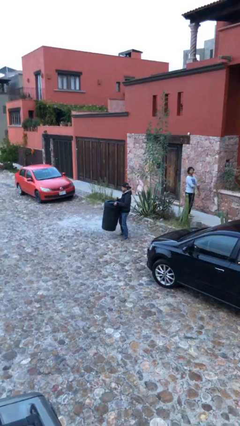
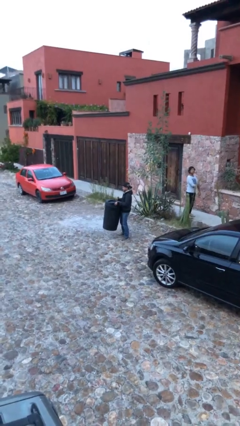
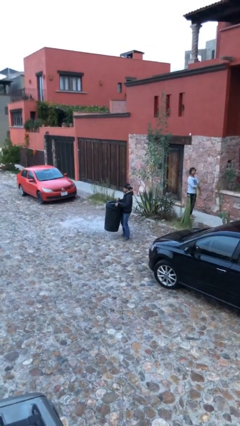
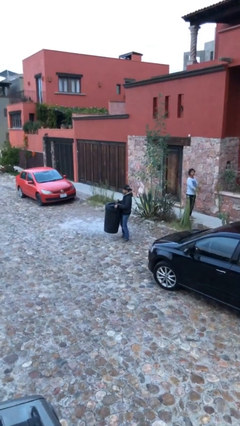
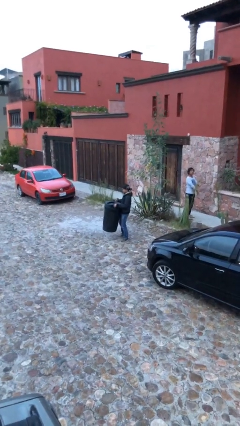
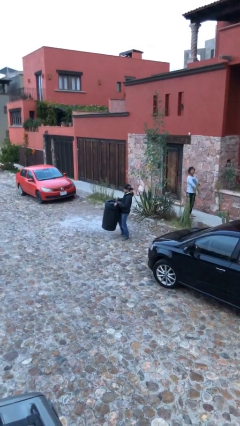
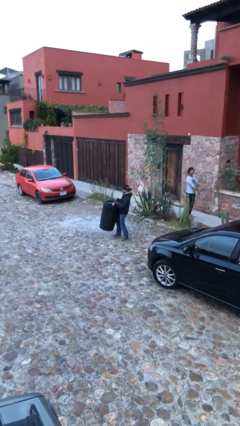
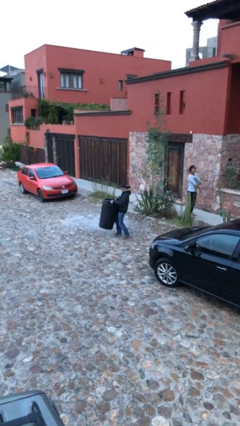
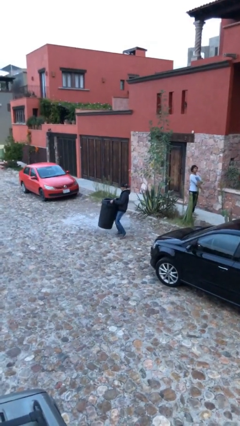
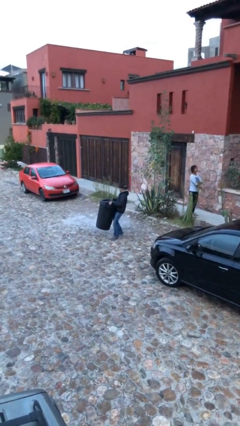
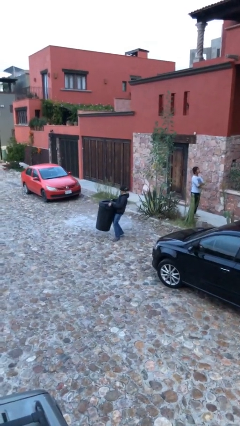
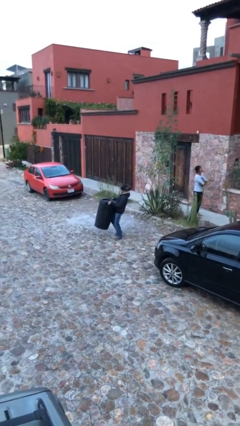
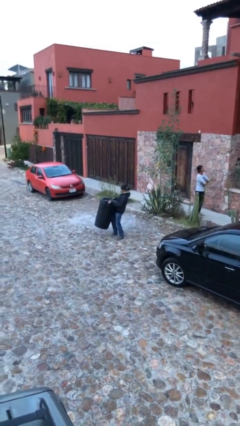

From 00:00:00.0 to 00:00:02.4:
person carries heavy object

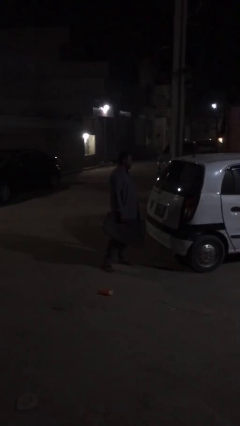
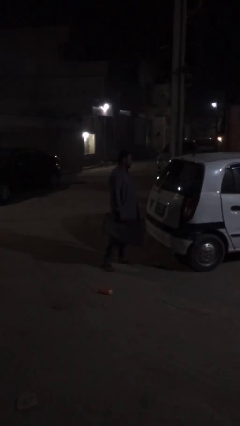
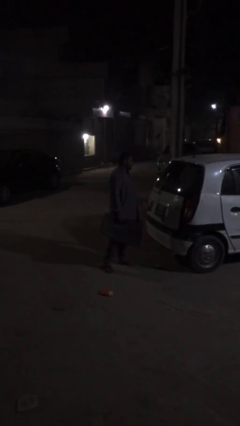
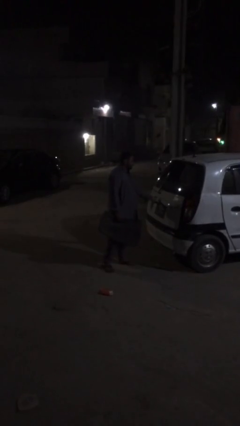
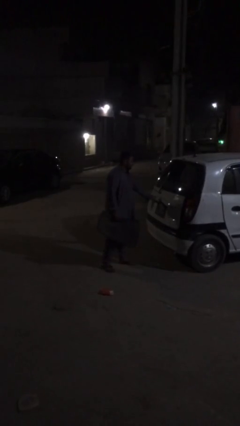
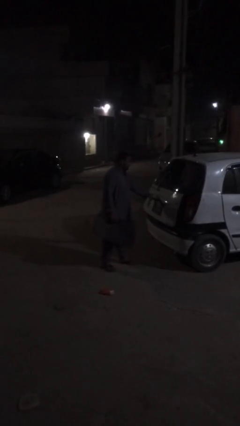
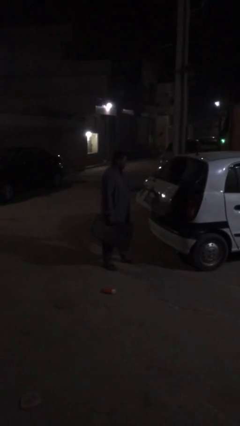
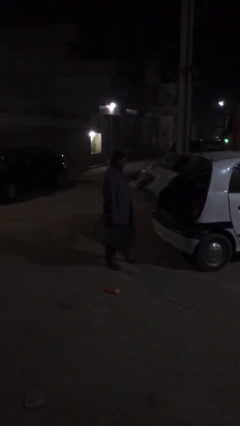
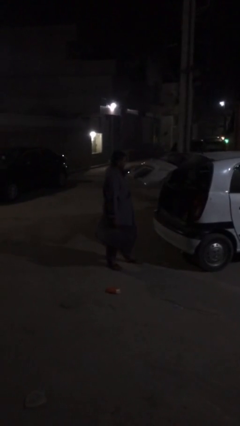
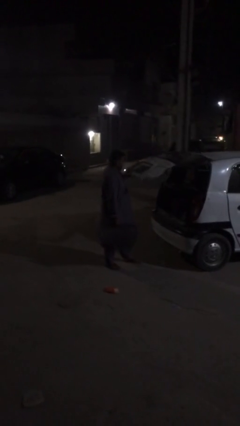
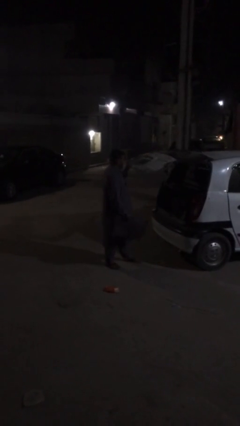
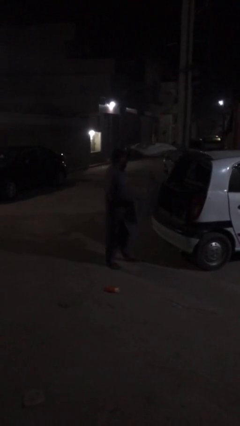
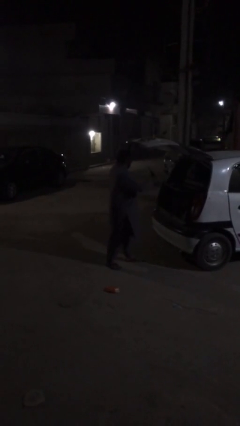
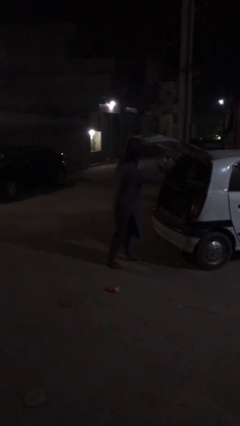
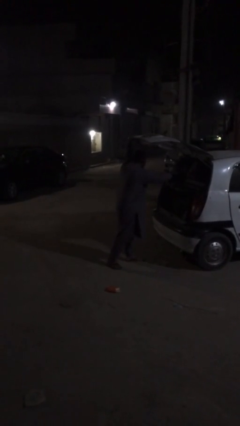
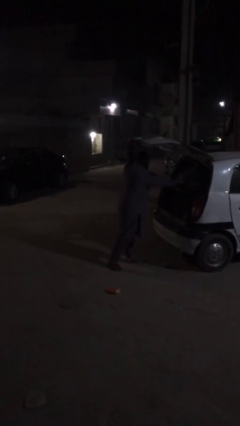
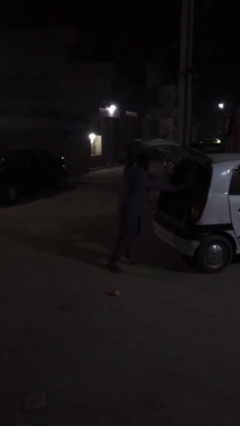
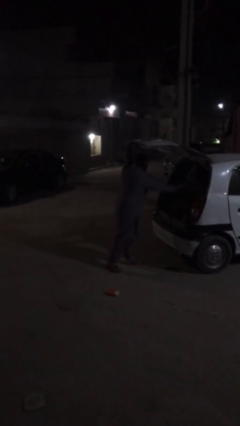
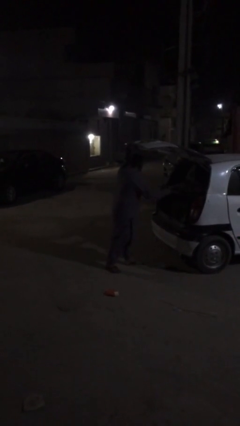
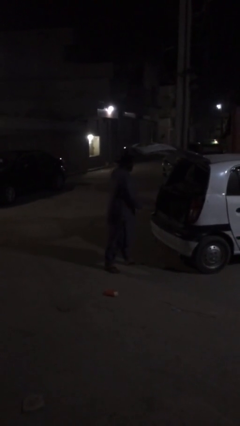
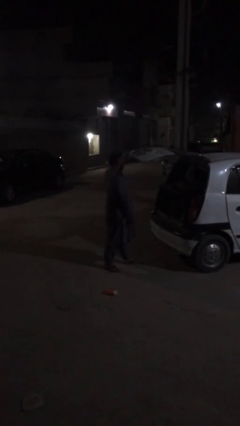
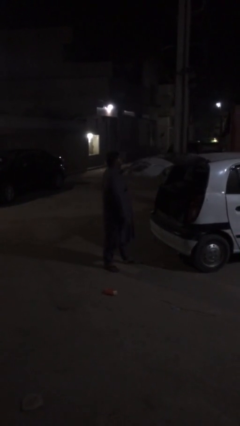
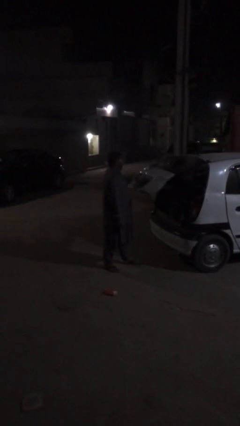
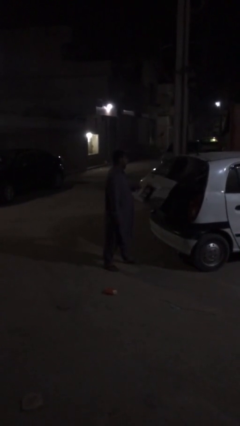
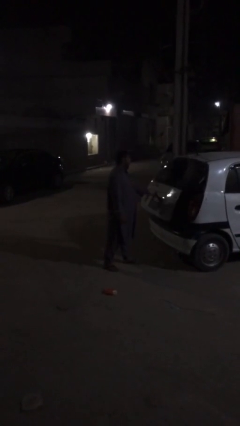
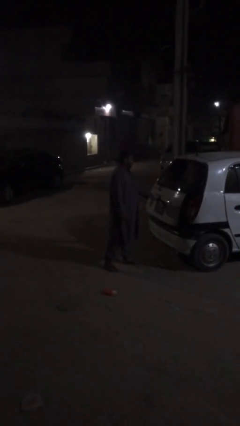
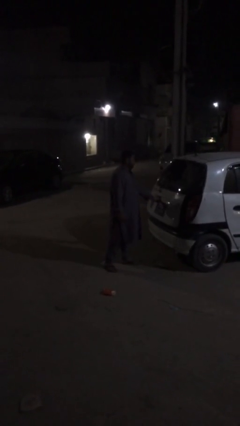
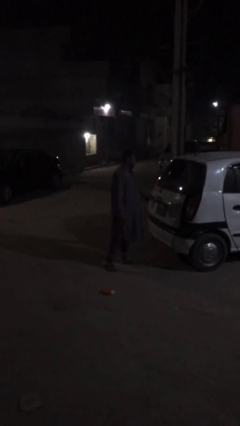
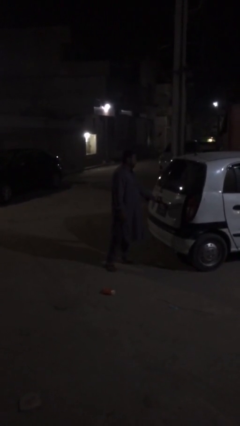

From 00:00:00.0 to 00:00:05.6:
person loads car

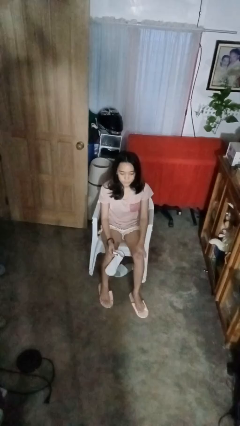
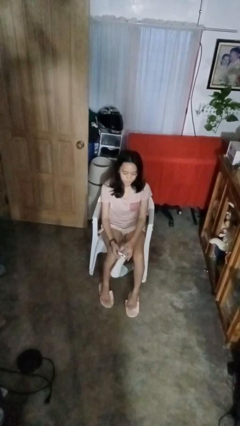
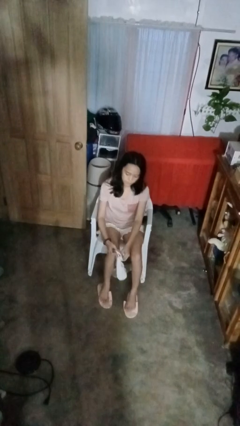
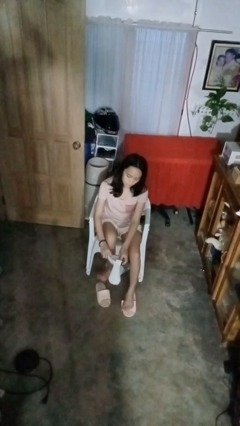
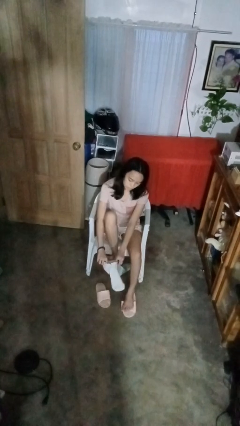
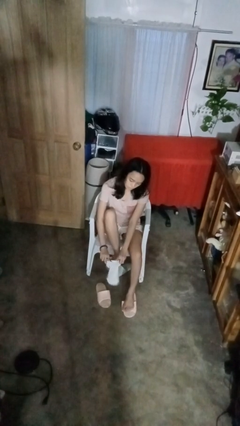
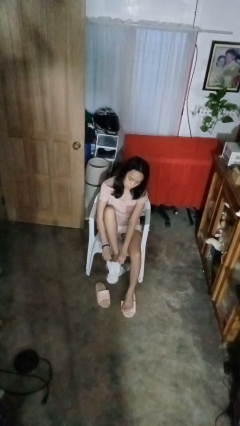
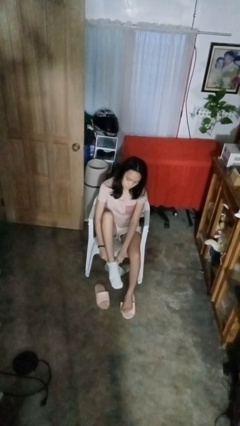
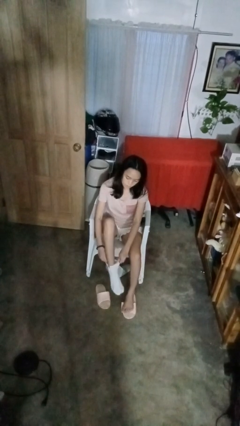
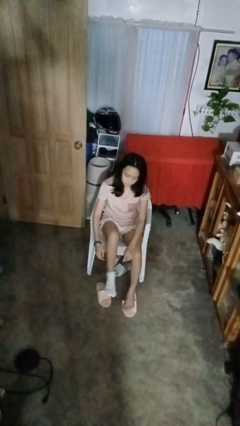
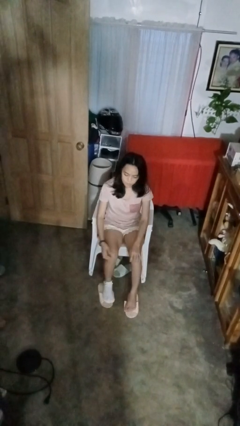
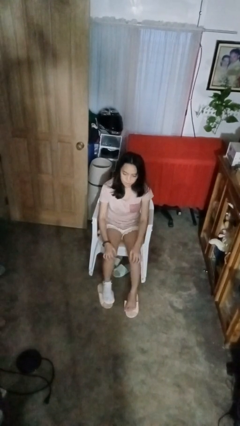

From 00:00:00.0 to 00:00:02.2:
person puts on socks

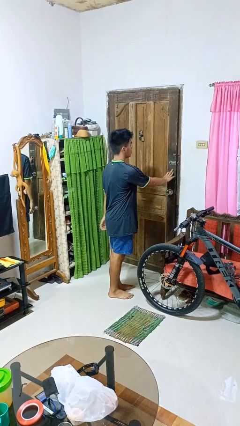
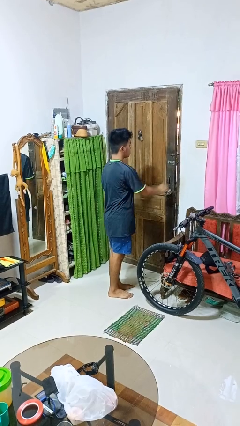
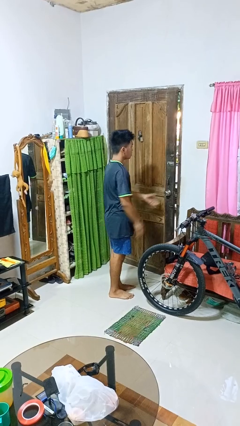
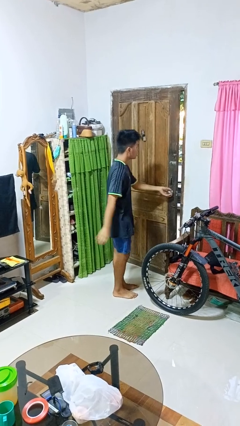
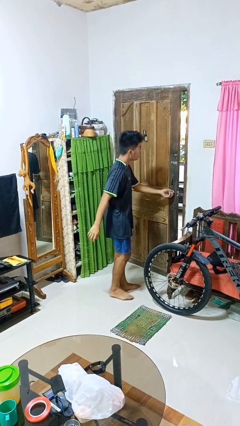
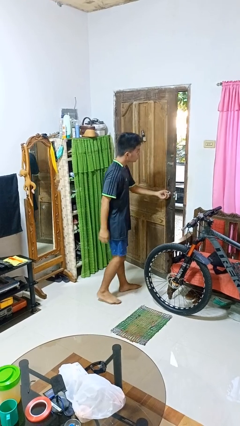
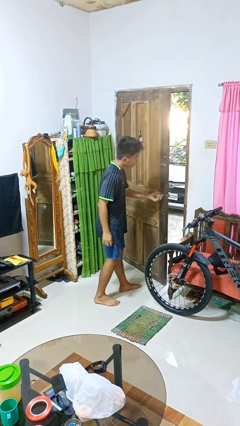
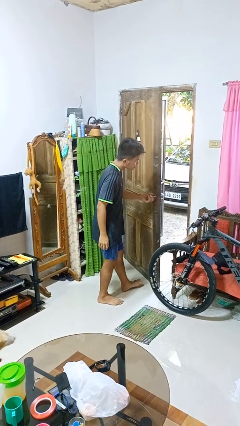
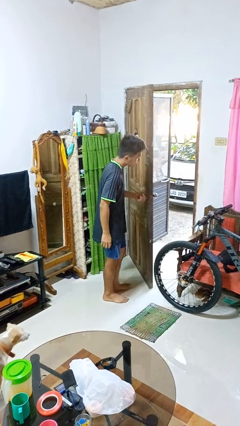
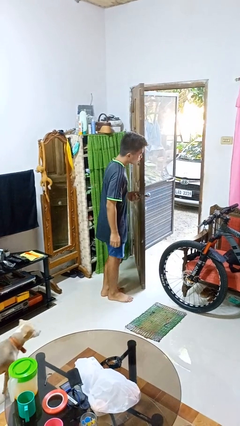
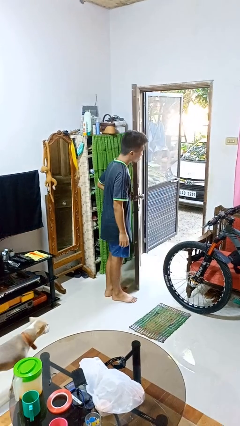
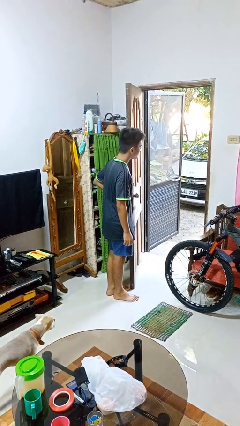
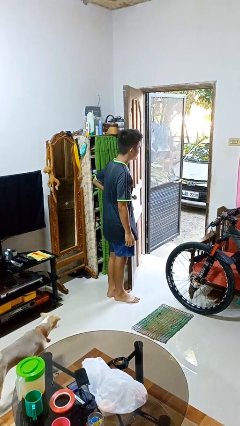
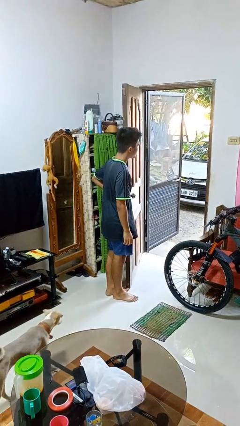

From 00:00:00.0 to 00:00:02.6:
person opens facility door

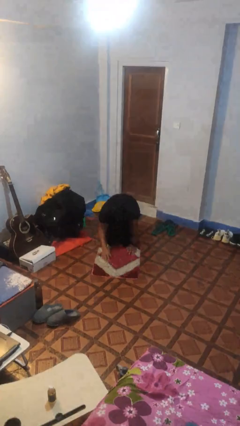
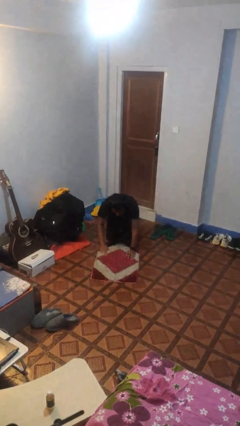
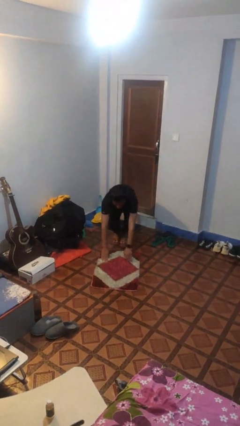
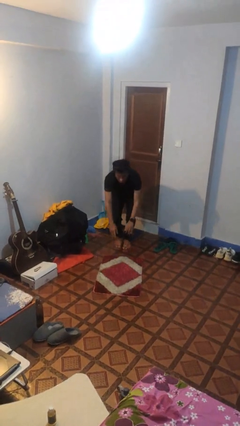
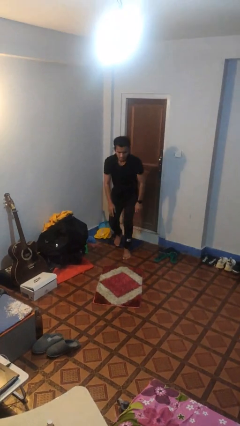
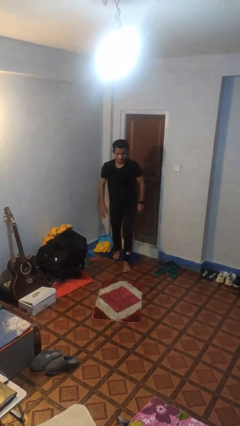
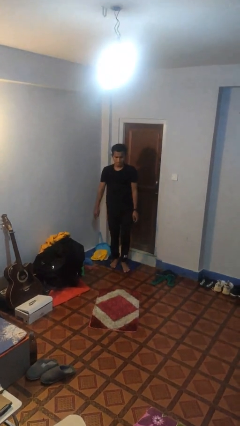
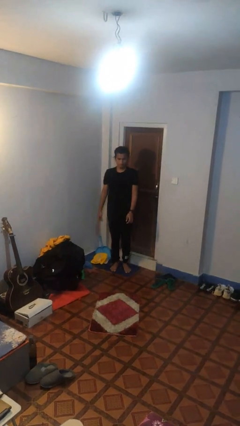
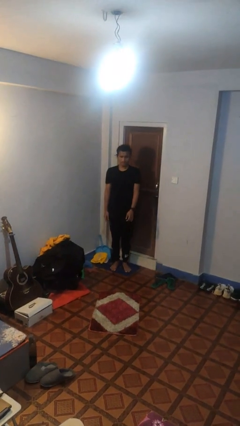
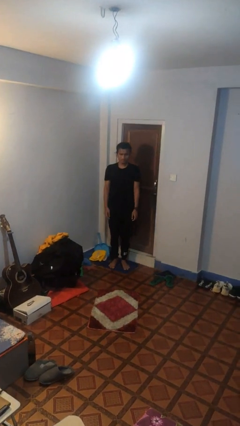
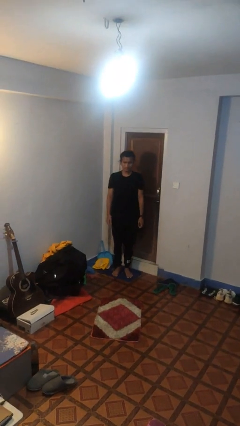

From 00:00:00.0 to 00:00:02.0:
person stands up from floor

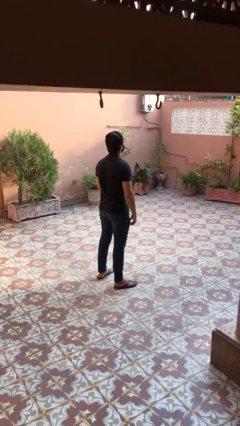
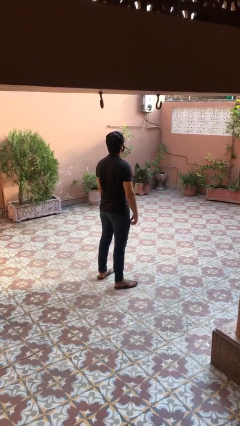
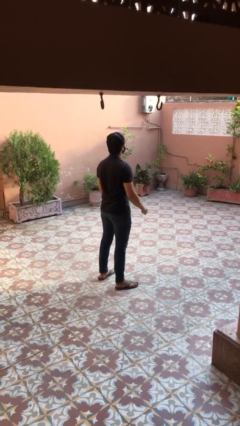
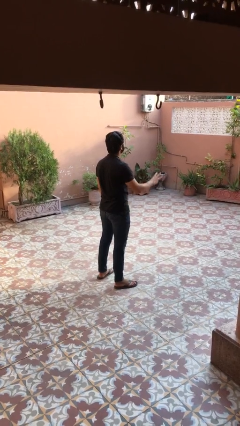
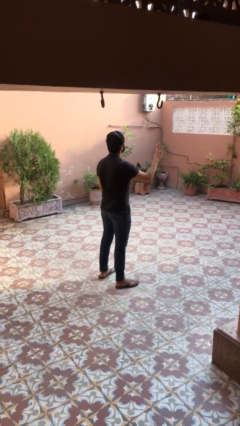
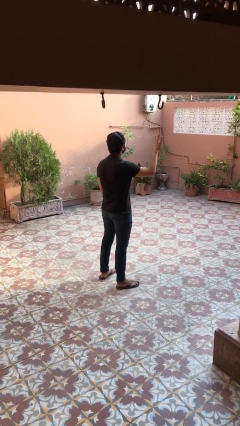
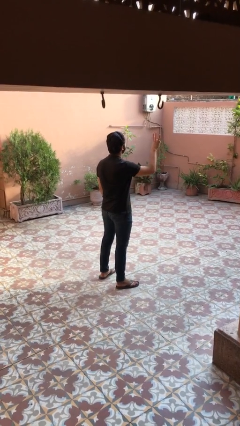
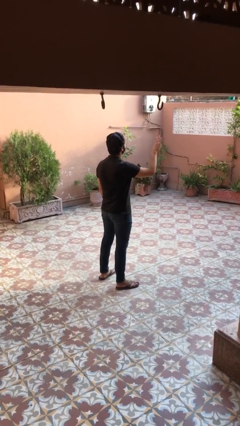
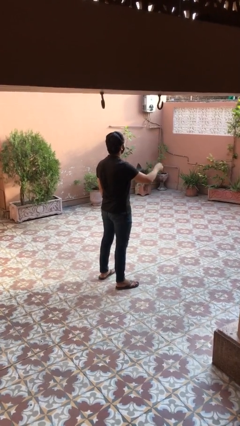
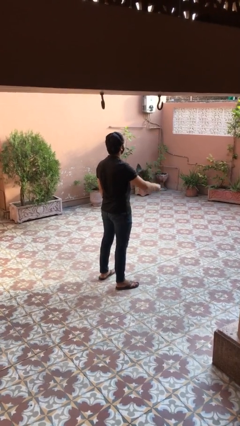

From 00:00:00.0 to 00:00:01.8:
person gestures number three

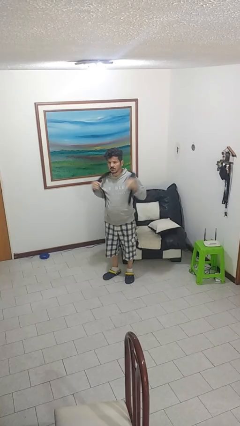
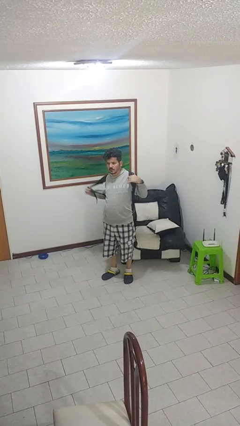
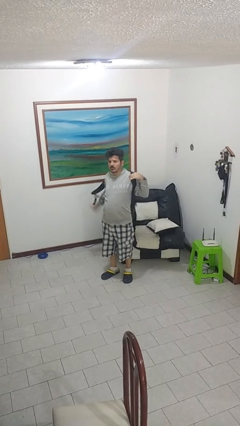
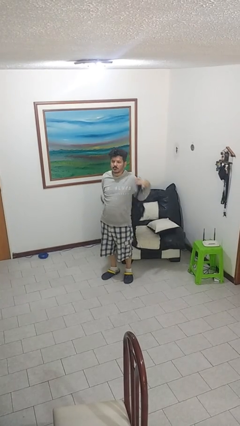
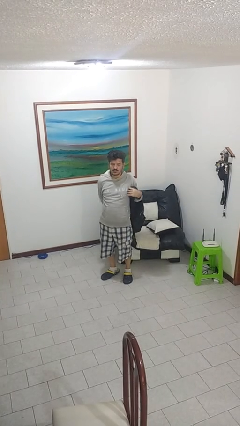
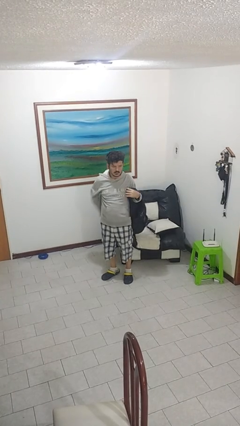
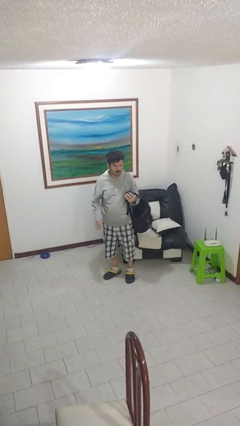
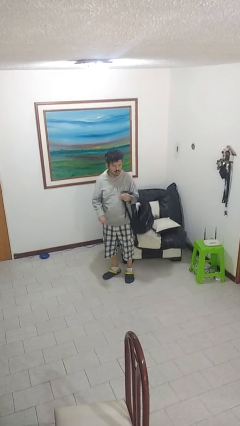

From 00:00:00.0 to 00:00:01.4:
person takes off backpack
